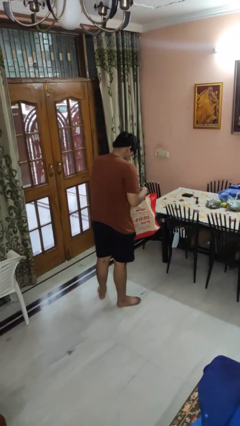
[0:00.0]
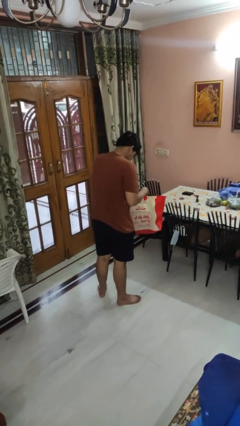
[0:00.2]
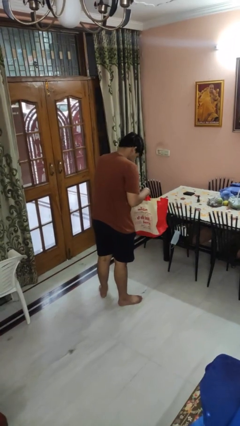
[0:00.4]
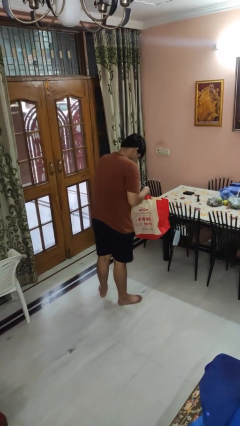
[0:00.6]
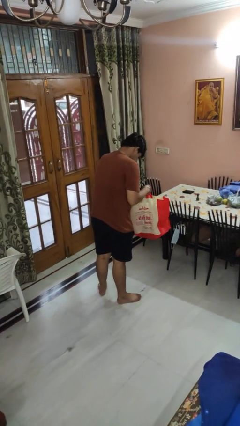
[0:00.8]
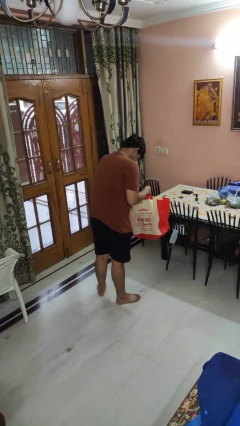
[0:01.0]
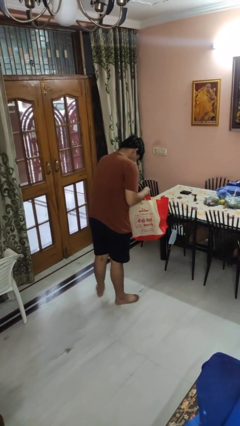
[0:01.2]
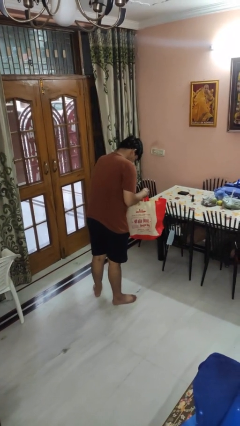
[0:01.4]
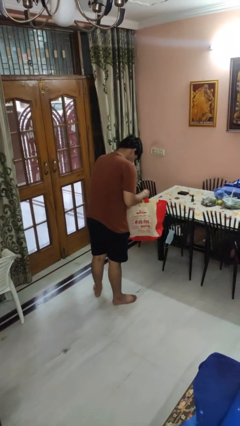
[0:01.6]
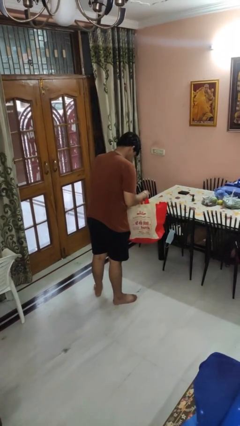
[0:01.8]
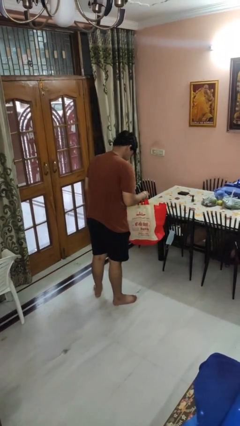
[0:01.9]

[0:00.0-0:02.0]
person searches in bag

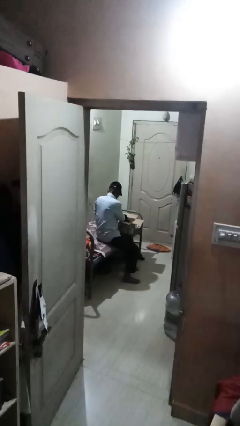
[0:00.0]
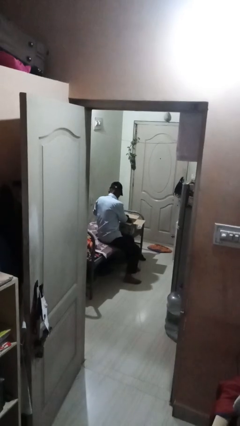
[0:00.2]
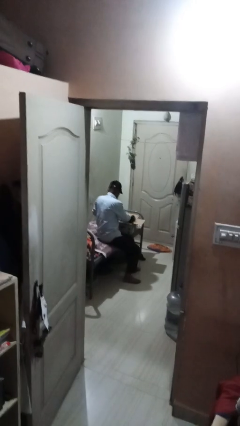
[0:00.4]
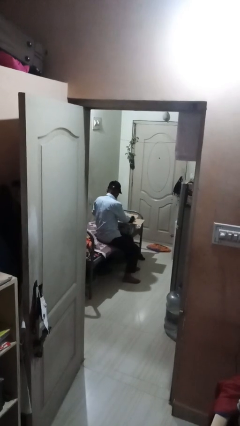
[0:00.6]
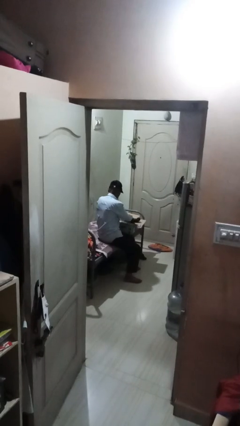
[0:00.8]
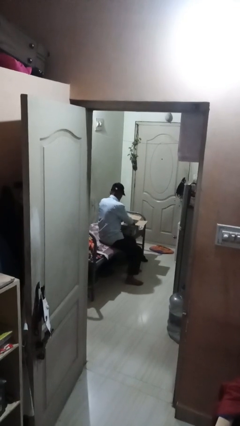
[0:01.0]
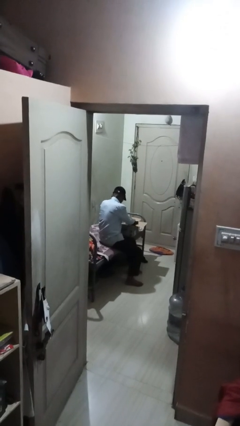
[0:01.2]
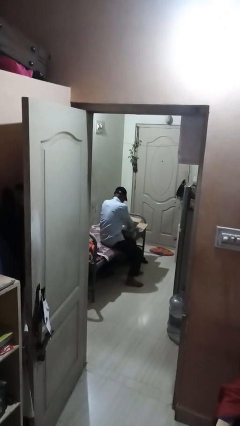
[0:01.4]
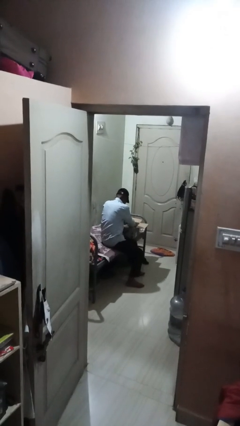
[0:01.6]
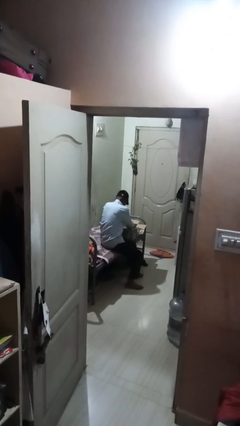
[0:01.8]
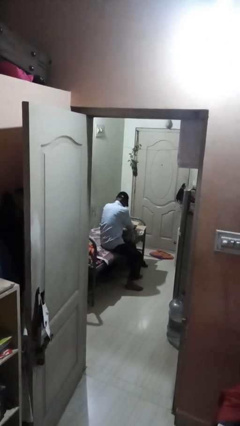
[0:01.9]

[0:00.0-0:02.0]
person searches in box

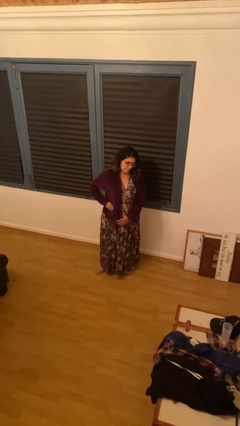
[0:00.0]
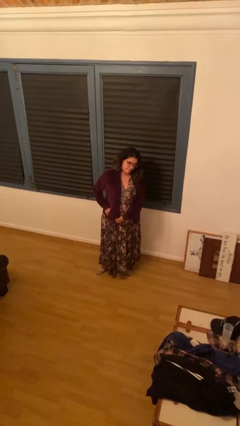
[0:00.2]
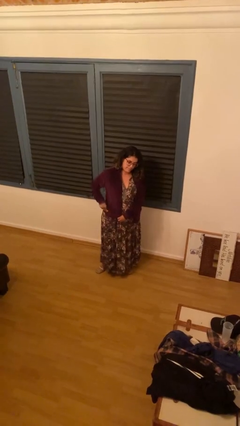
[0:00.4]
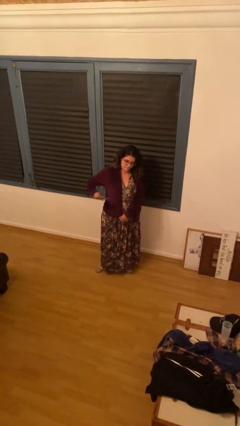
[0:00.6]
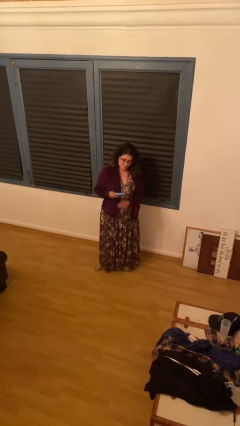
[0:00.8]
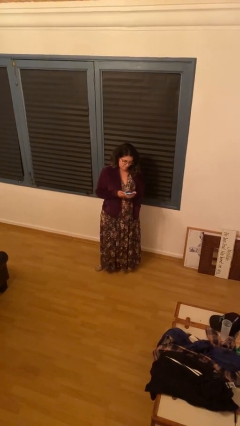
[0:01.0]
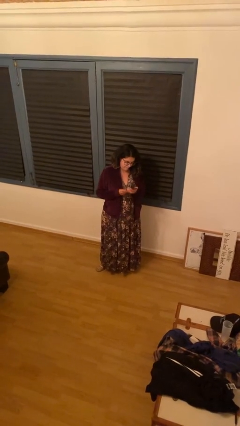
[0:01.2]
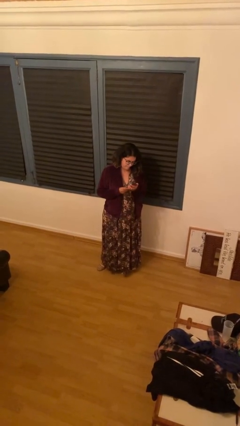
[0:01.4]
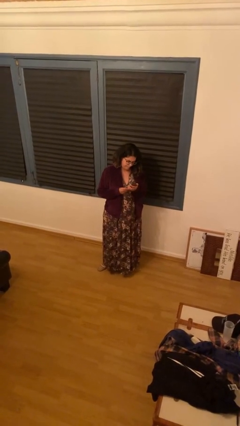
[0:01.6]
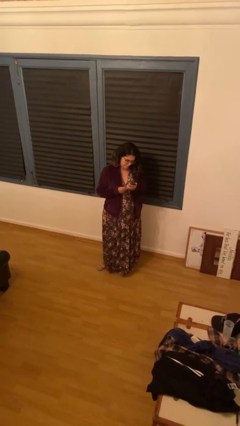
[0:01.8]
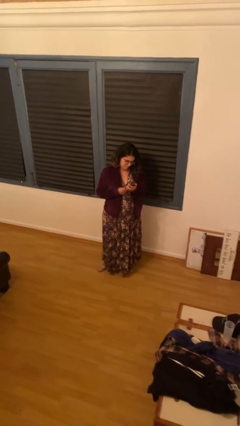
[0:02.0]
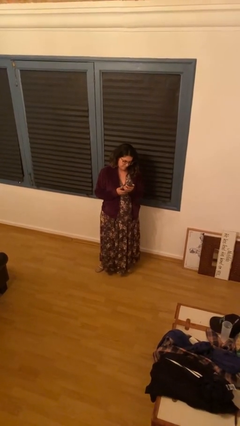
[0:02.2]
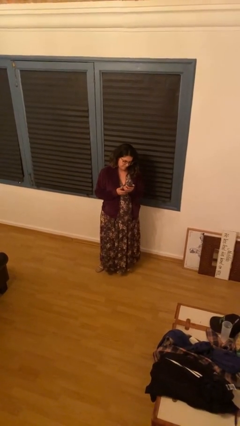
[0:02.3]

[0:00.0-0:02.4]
person takes phone from pocket

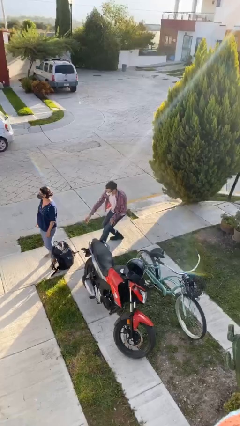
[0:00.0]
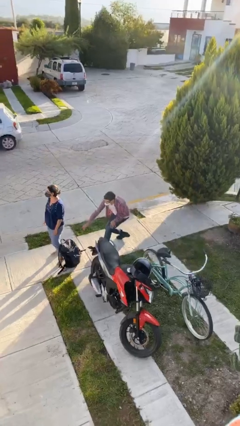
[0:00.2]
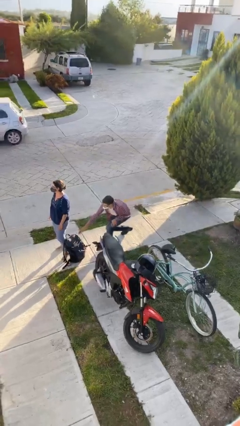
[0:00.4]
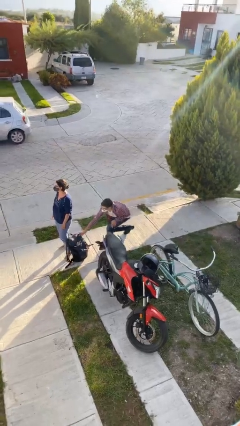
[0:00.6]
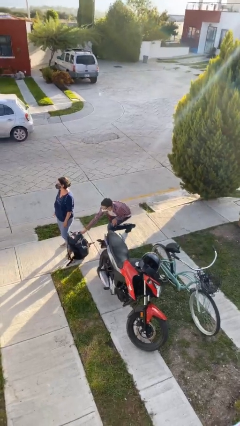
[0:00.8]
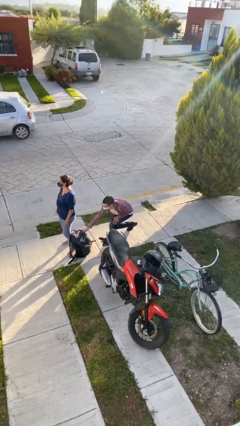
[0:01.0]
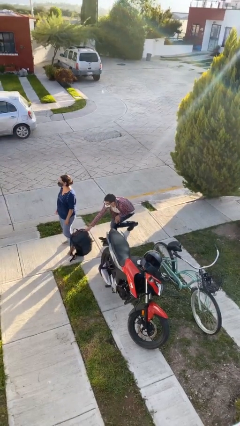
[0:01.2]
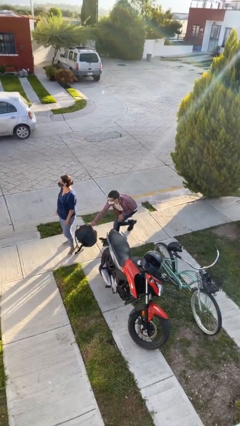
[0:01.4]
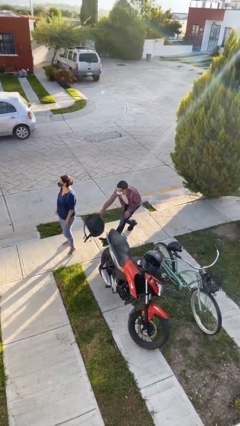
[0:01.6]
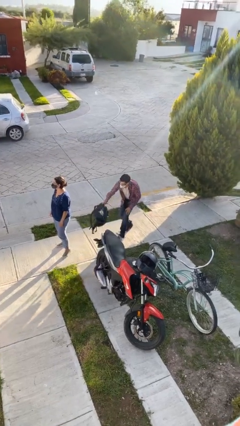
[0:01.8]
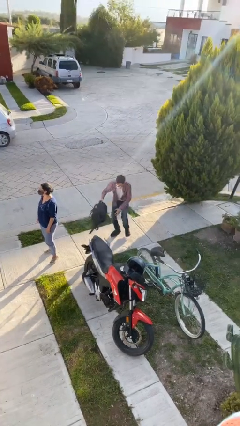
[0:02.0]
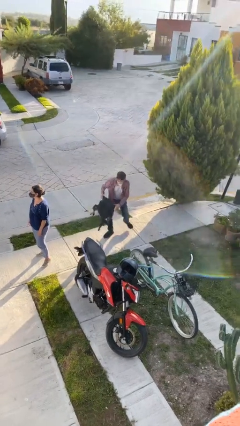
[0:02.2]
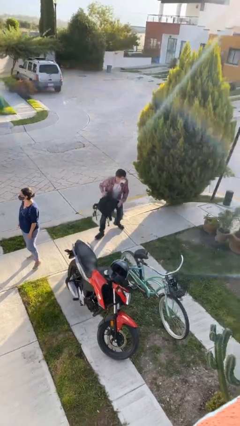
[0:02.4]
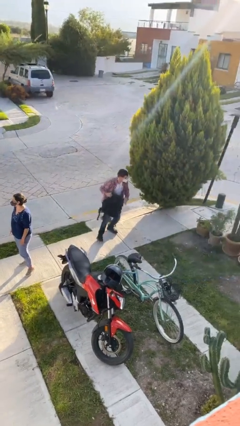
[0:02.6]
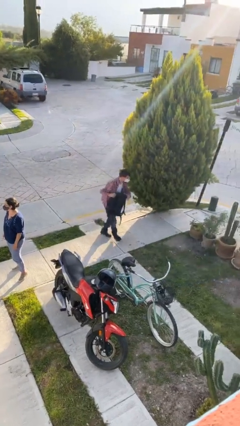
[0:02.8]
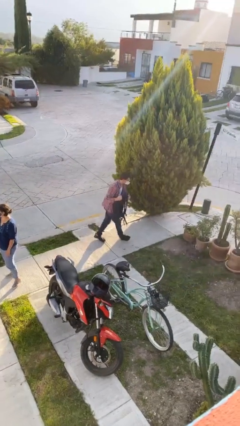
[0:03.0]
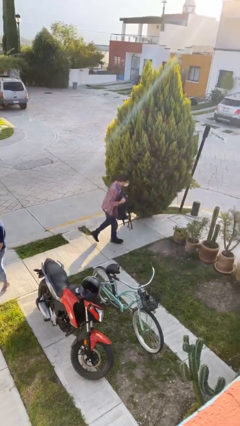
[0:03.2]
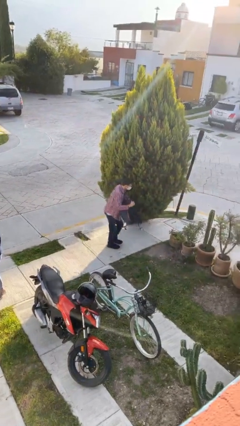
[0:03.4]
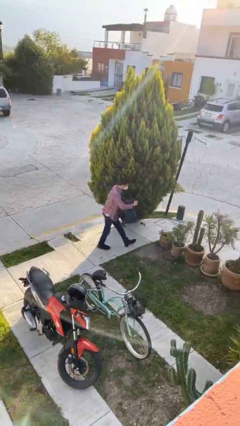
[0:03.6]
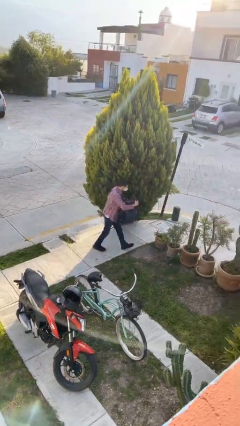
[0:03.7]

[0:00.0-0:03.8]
person steals object from person

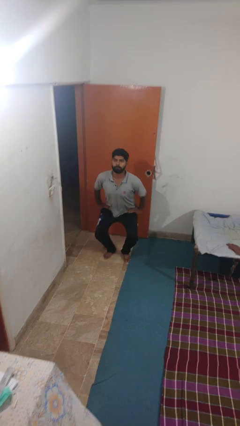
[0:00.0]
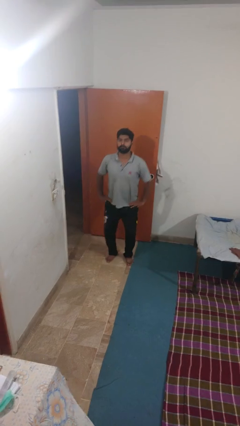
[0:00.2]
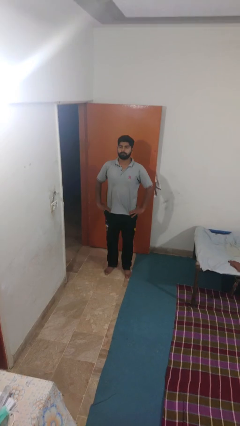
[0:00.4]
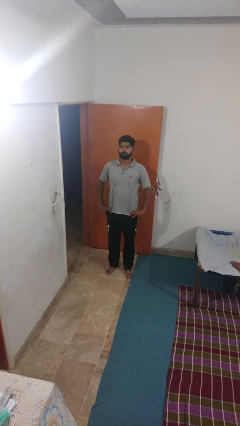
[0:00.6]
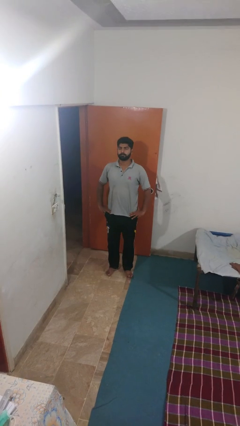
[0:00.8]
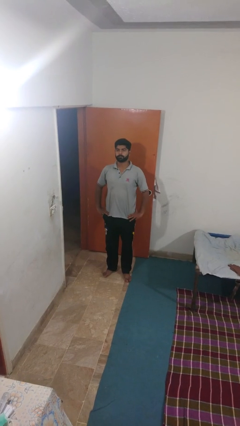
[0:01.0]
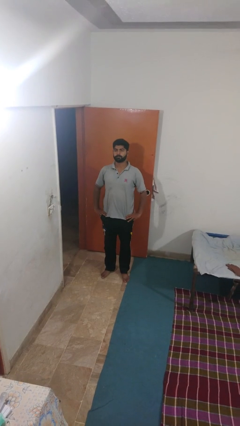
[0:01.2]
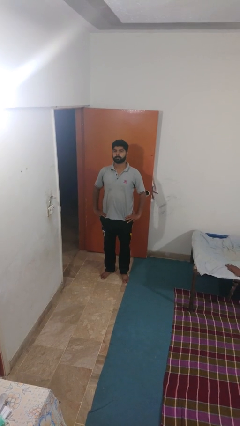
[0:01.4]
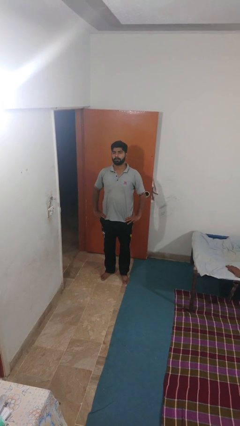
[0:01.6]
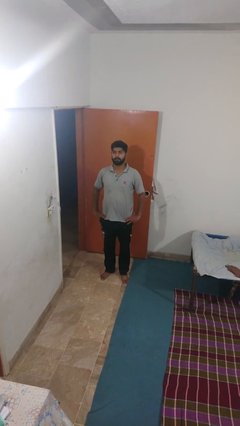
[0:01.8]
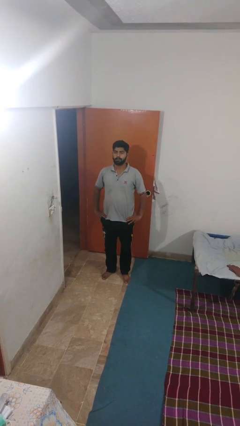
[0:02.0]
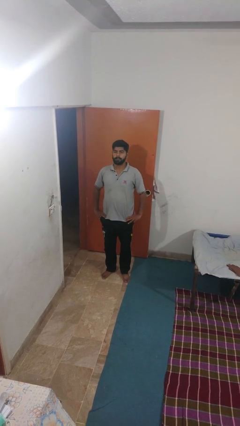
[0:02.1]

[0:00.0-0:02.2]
person stands up

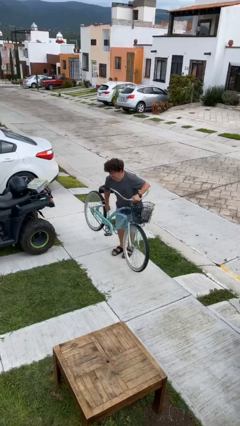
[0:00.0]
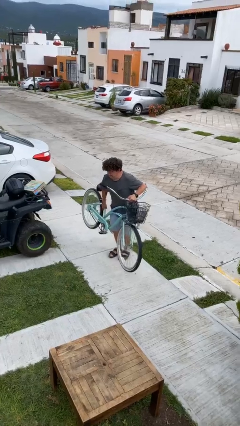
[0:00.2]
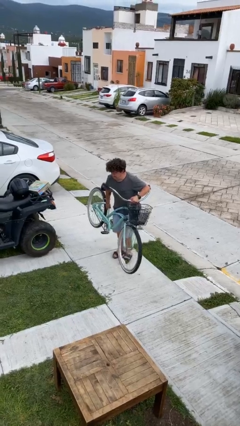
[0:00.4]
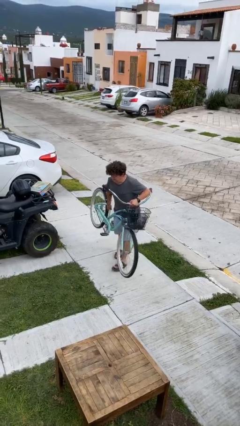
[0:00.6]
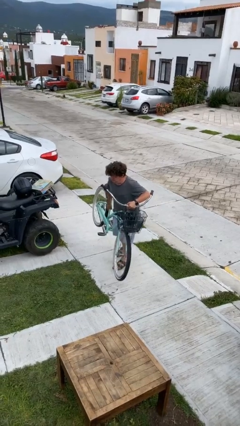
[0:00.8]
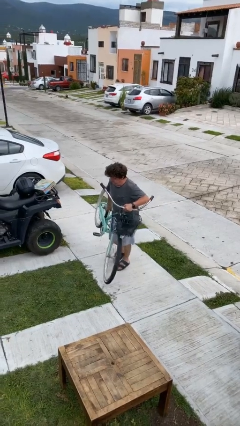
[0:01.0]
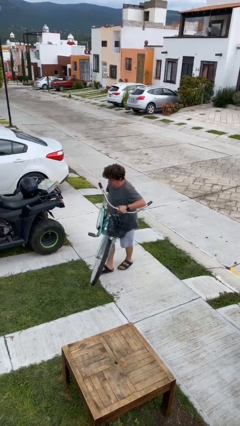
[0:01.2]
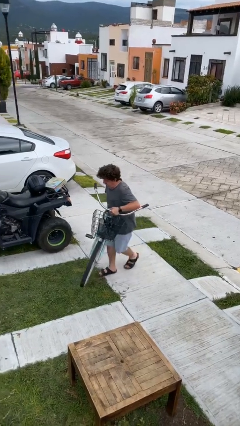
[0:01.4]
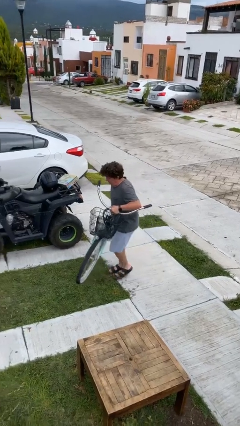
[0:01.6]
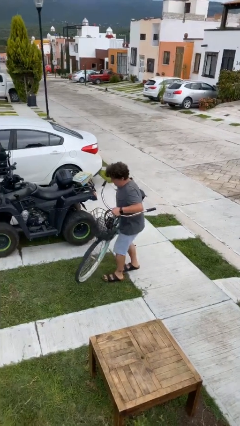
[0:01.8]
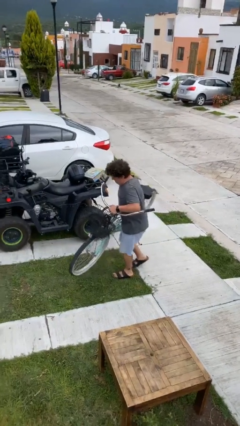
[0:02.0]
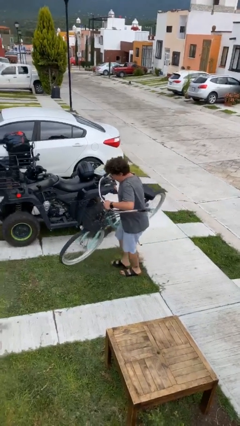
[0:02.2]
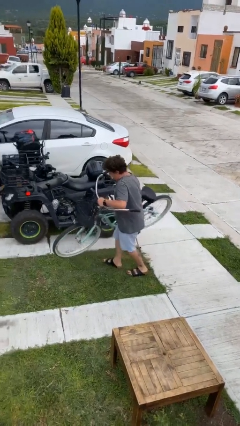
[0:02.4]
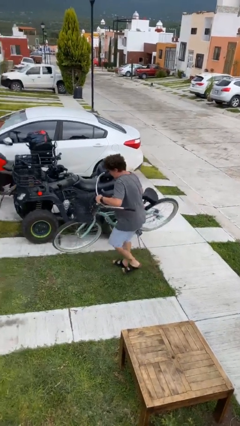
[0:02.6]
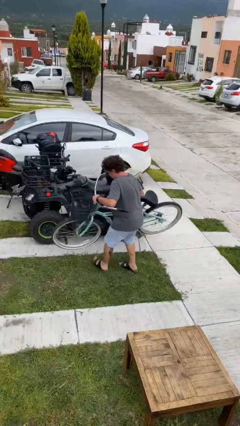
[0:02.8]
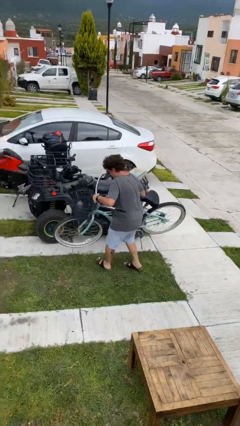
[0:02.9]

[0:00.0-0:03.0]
person carries heavy object

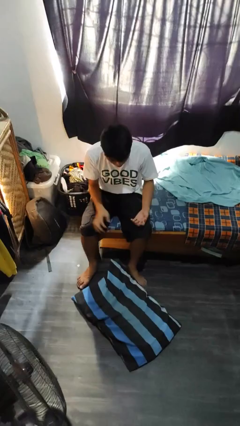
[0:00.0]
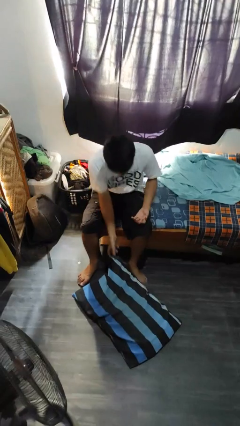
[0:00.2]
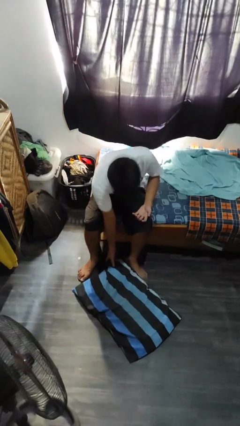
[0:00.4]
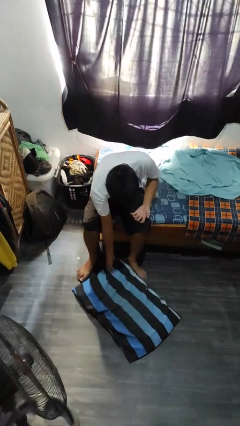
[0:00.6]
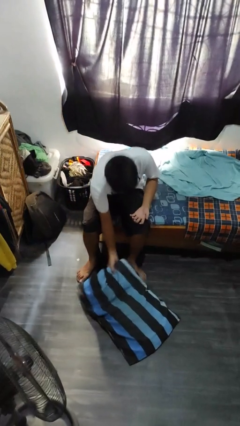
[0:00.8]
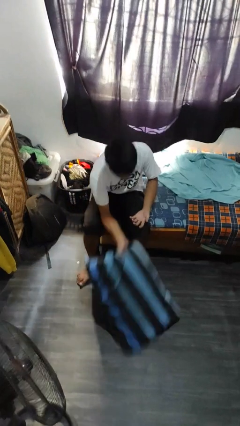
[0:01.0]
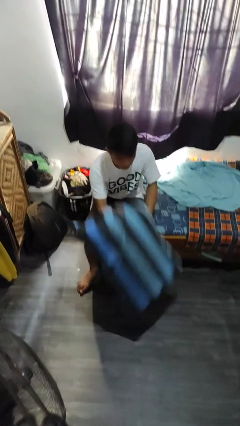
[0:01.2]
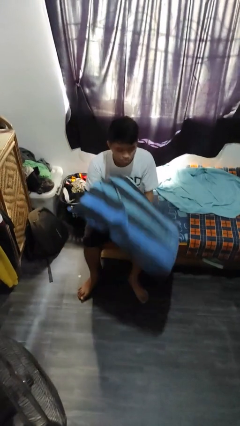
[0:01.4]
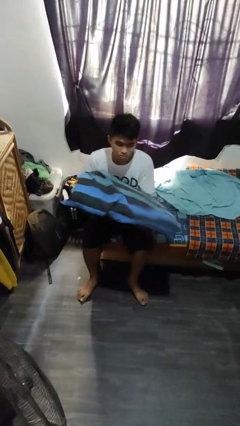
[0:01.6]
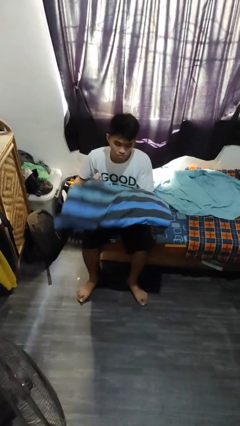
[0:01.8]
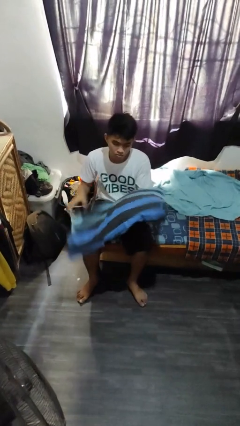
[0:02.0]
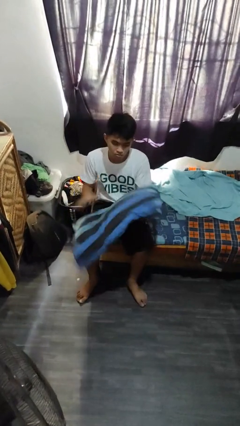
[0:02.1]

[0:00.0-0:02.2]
person picks up object from floor
